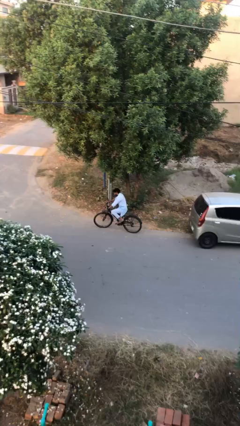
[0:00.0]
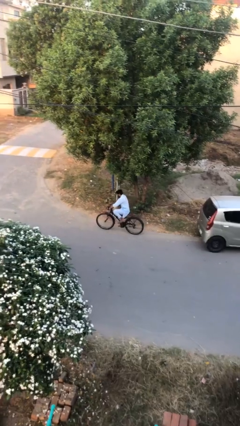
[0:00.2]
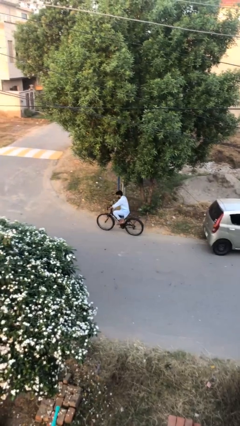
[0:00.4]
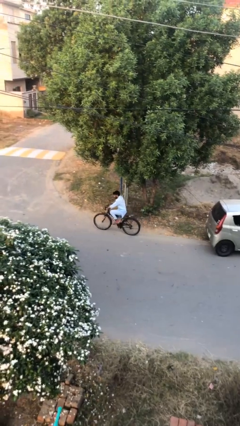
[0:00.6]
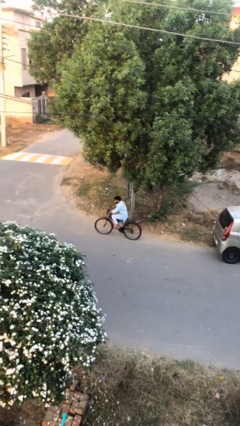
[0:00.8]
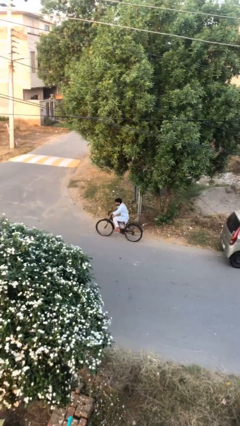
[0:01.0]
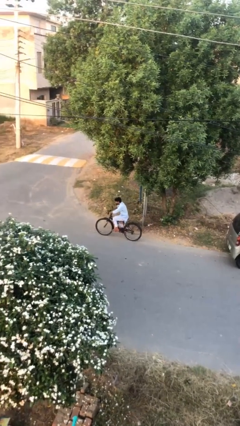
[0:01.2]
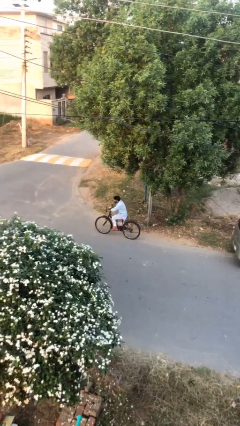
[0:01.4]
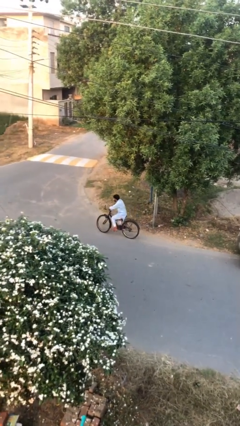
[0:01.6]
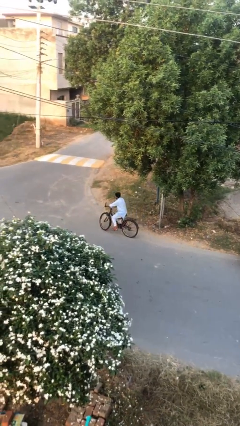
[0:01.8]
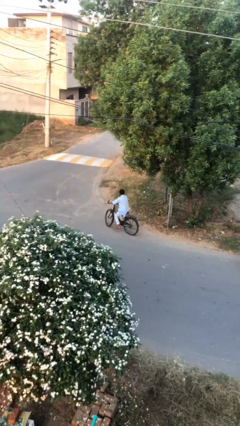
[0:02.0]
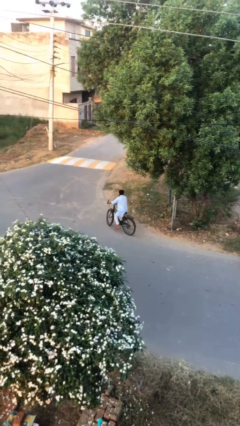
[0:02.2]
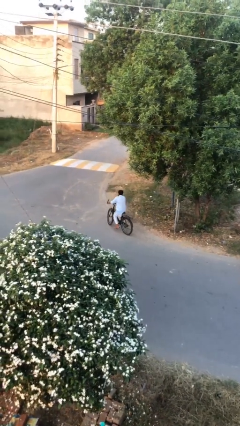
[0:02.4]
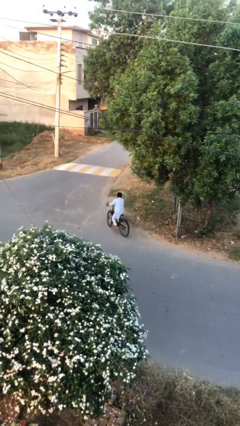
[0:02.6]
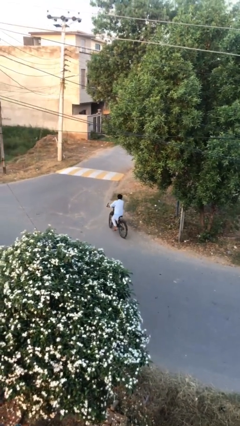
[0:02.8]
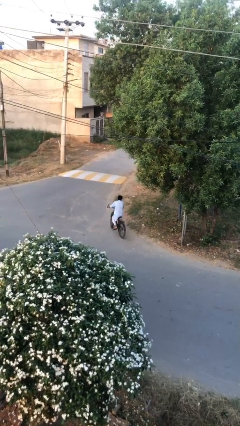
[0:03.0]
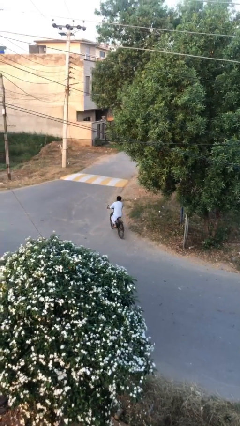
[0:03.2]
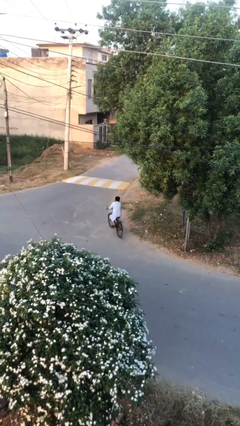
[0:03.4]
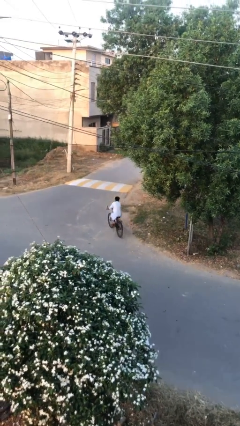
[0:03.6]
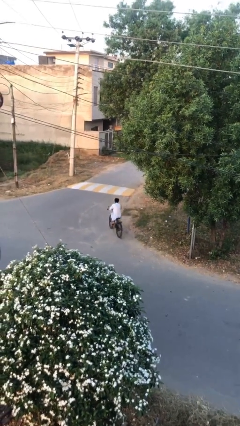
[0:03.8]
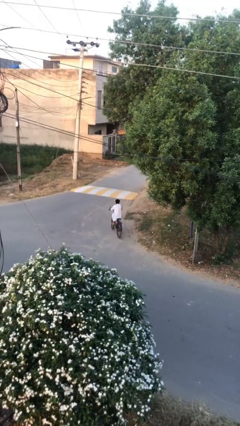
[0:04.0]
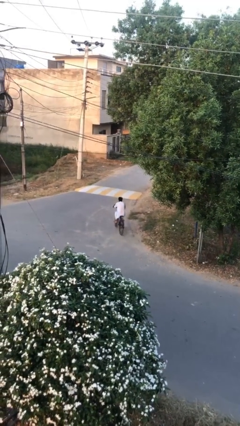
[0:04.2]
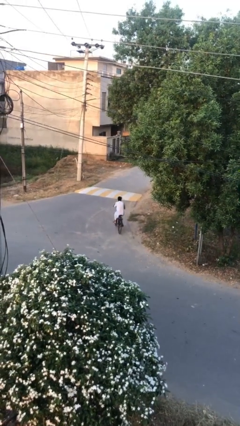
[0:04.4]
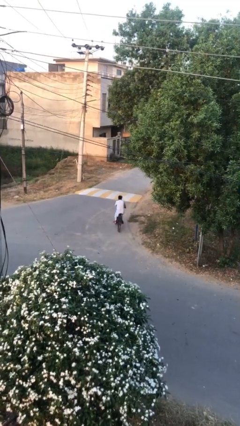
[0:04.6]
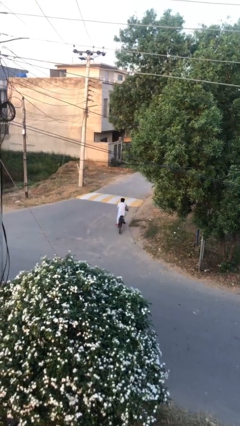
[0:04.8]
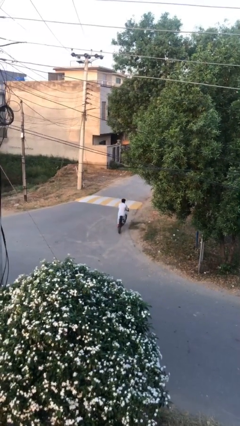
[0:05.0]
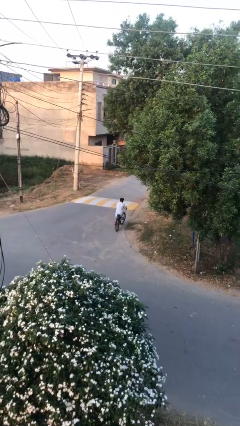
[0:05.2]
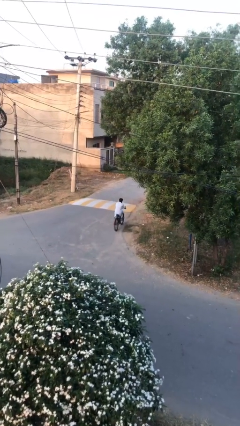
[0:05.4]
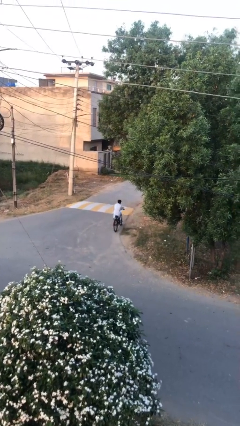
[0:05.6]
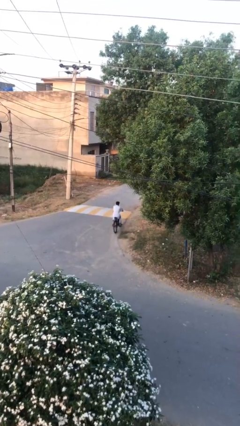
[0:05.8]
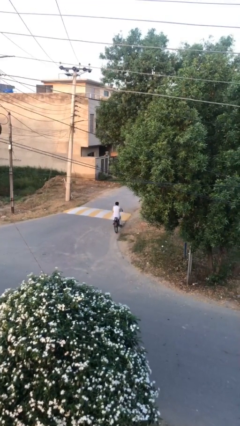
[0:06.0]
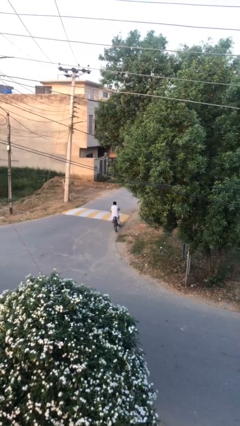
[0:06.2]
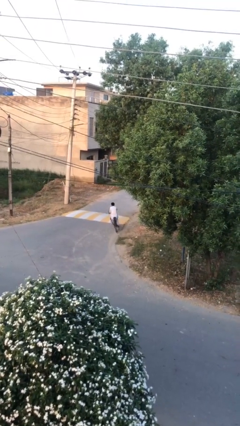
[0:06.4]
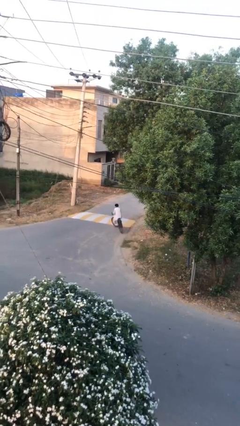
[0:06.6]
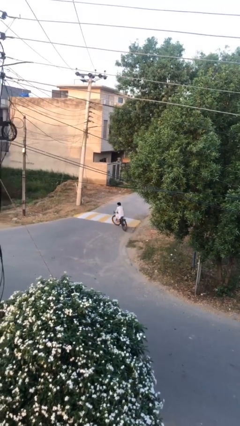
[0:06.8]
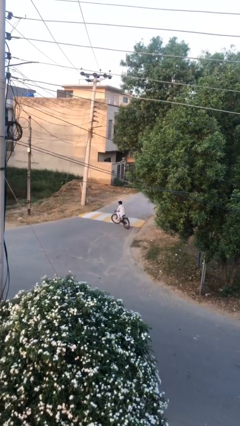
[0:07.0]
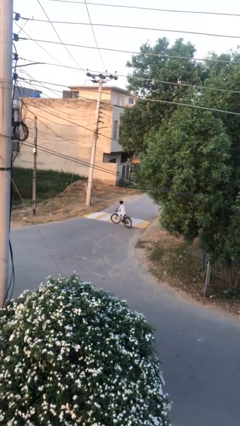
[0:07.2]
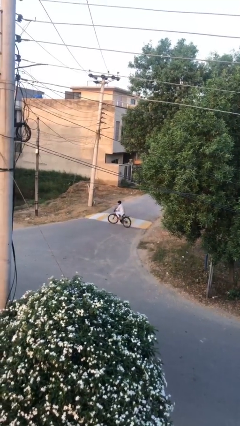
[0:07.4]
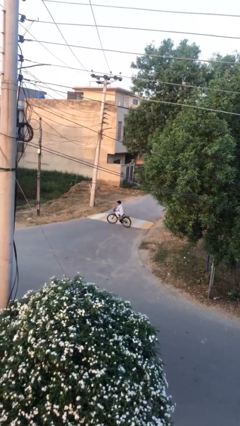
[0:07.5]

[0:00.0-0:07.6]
person rides bicycle

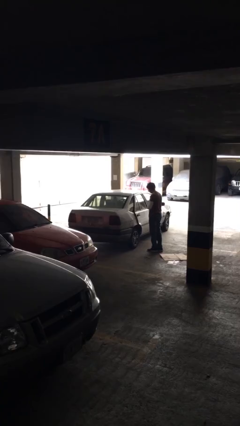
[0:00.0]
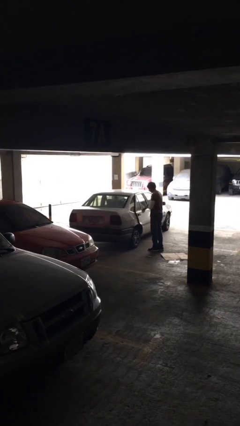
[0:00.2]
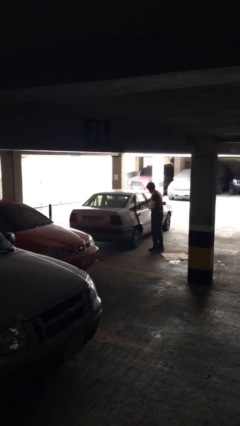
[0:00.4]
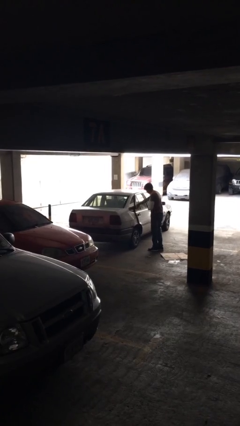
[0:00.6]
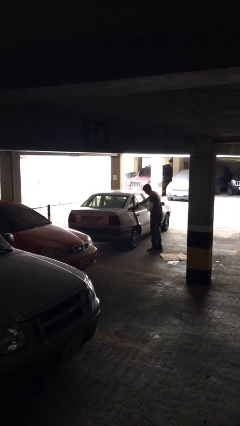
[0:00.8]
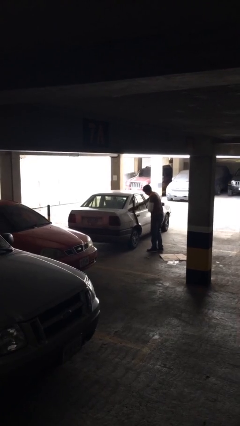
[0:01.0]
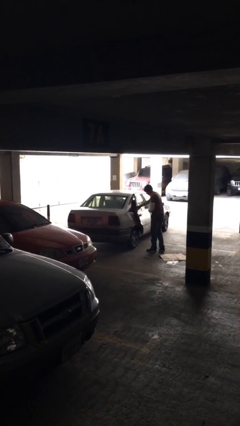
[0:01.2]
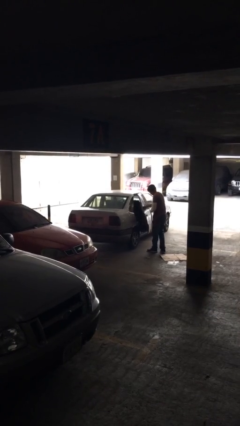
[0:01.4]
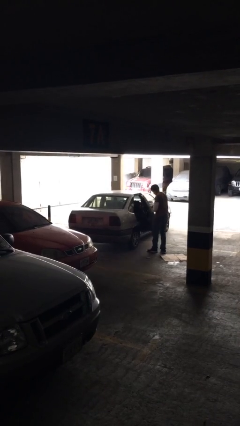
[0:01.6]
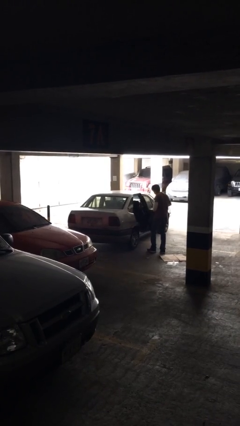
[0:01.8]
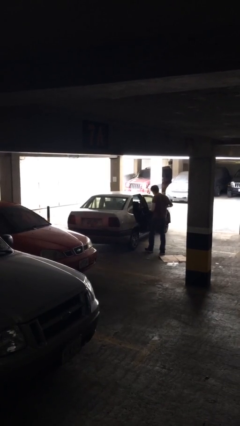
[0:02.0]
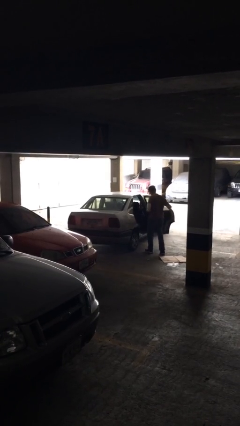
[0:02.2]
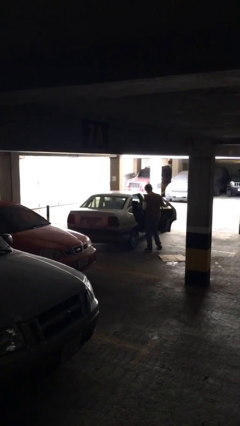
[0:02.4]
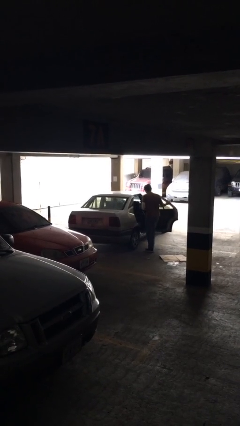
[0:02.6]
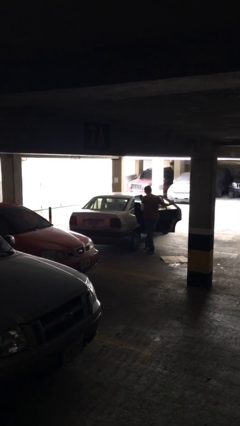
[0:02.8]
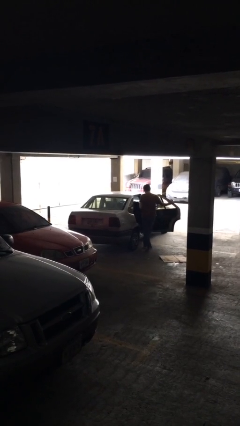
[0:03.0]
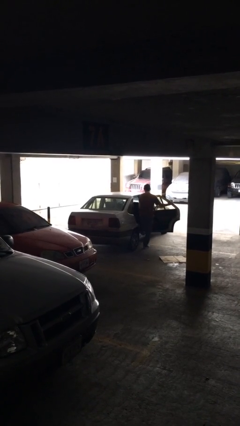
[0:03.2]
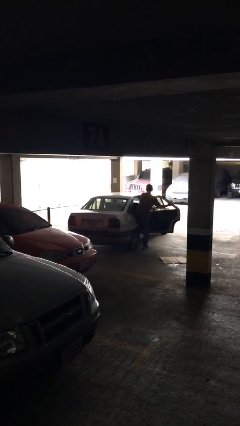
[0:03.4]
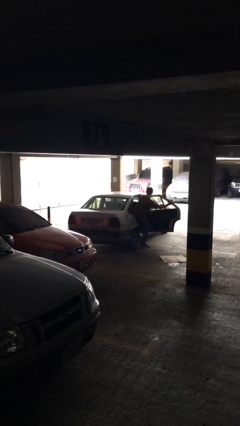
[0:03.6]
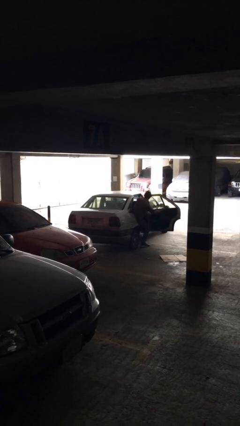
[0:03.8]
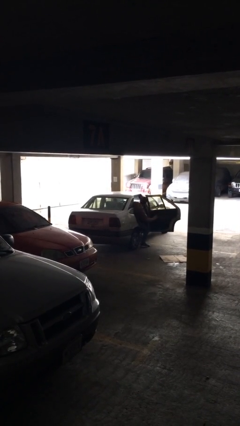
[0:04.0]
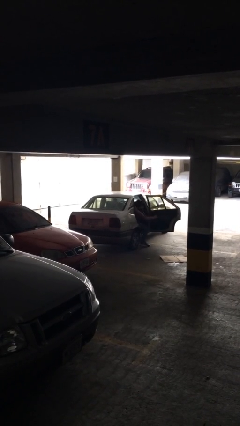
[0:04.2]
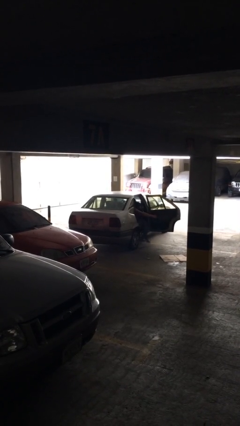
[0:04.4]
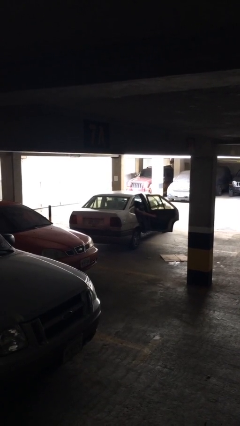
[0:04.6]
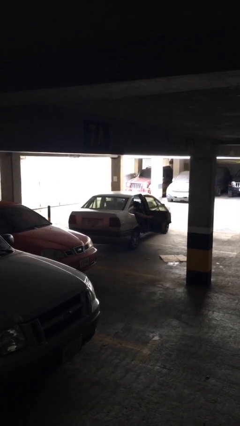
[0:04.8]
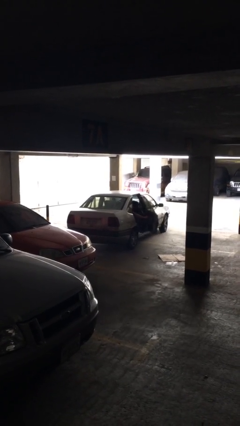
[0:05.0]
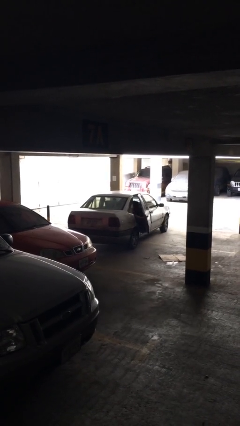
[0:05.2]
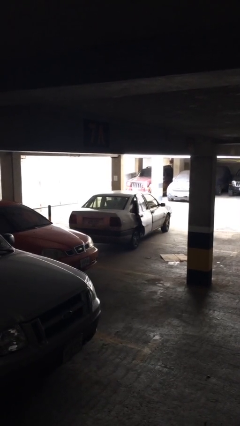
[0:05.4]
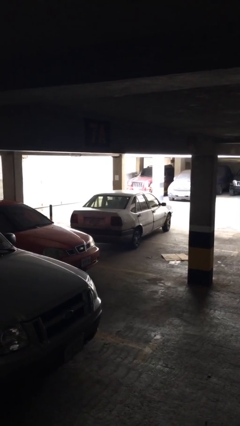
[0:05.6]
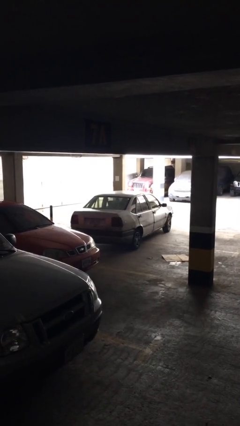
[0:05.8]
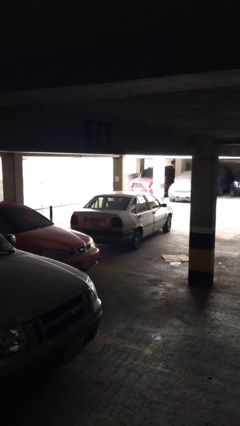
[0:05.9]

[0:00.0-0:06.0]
car picks up person

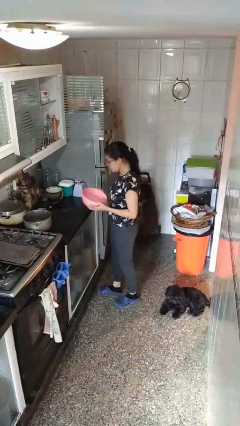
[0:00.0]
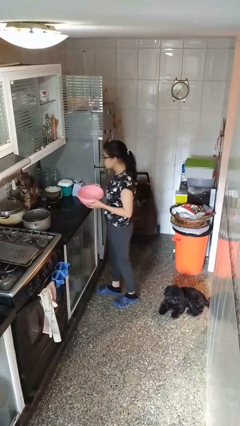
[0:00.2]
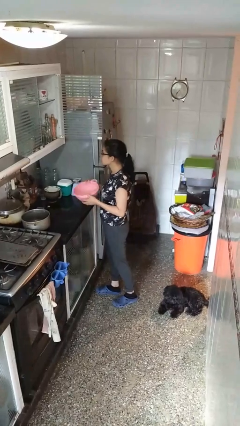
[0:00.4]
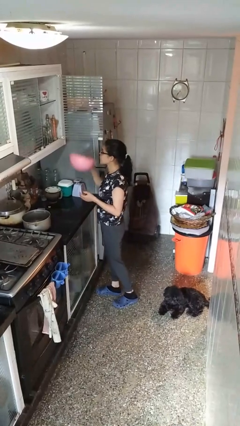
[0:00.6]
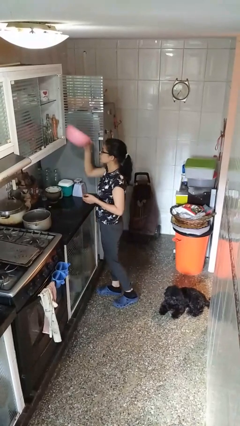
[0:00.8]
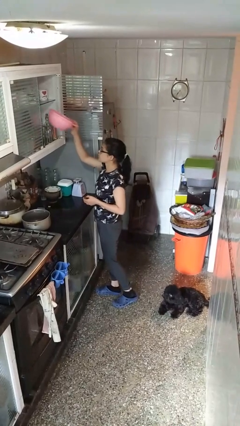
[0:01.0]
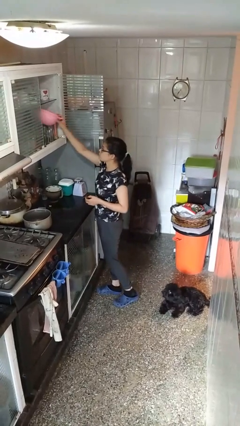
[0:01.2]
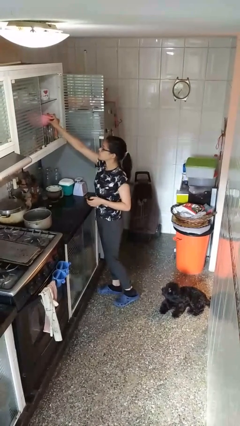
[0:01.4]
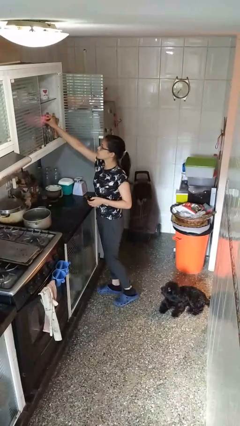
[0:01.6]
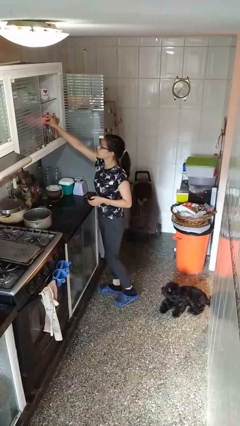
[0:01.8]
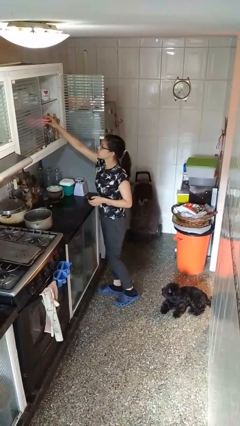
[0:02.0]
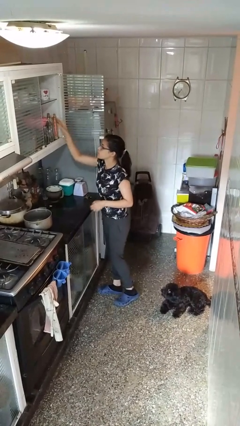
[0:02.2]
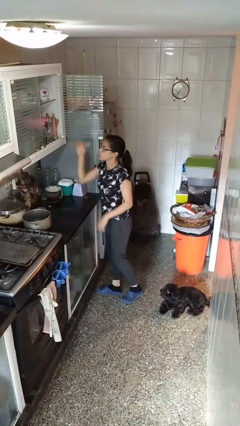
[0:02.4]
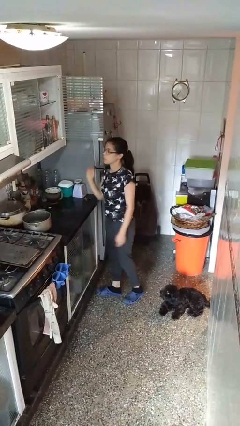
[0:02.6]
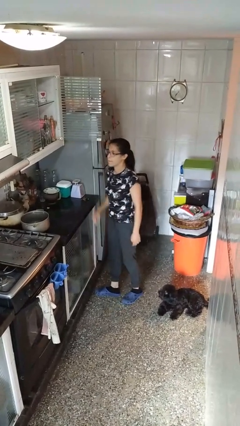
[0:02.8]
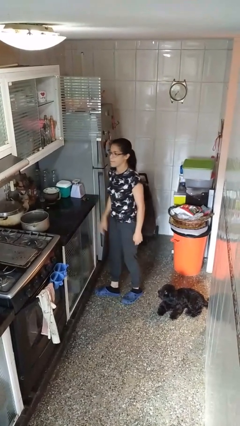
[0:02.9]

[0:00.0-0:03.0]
person puts down object into cabinet

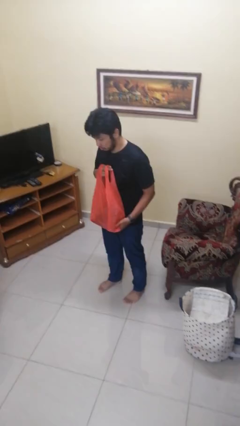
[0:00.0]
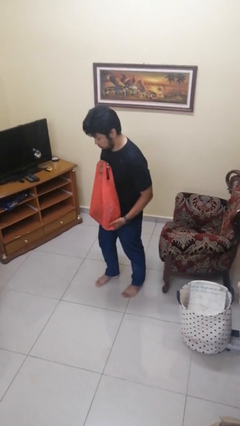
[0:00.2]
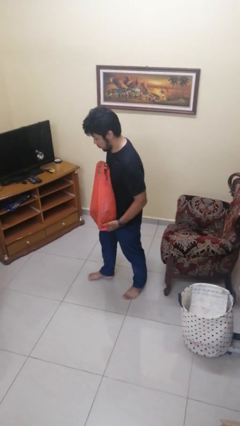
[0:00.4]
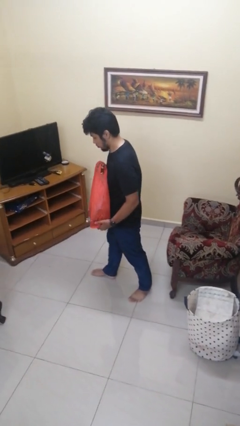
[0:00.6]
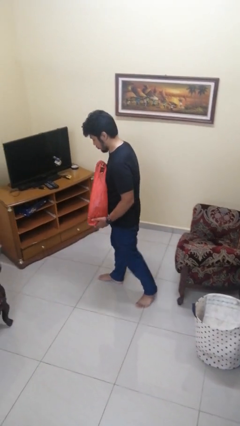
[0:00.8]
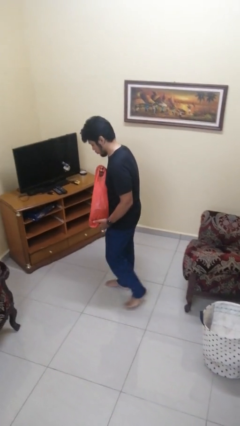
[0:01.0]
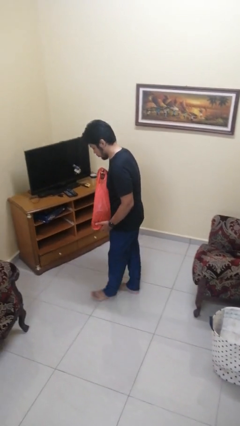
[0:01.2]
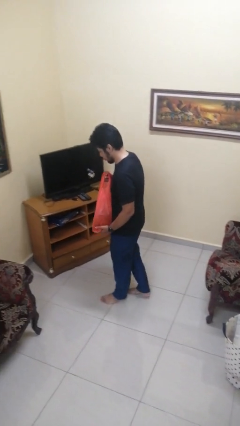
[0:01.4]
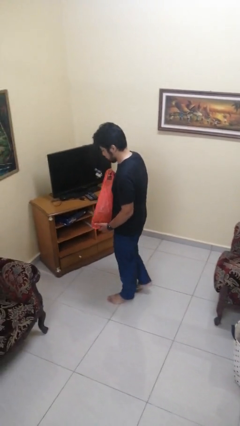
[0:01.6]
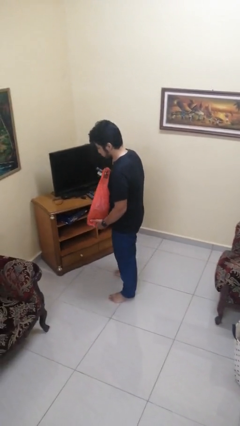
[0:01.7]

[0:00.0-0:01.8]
person carries groceries
